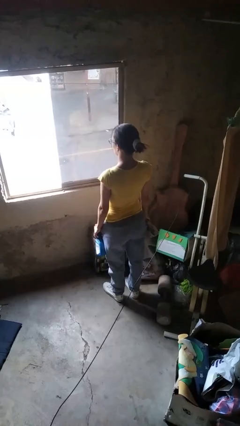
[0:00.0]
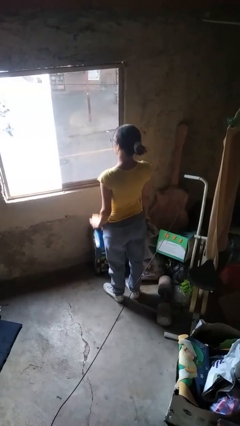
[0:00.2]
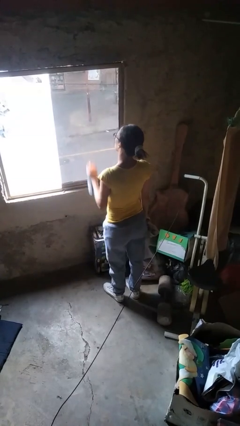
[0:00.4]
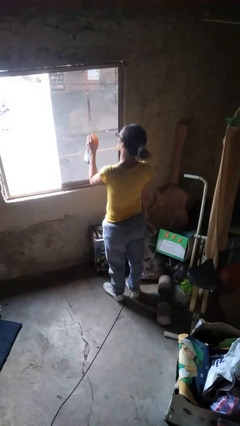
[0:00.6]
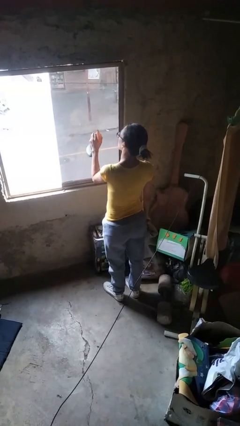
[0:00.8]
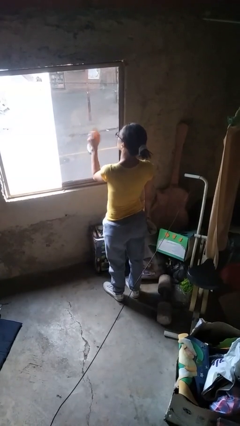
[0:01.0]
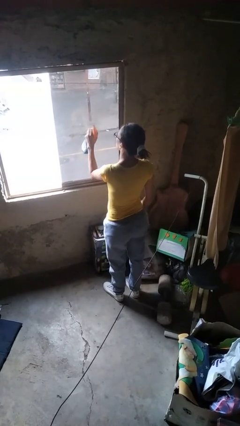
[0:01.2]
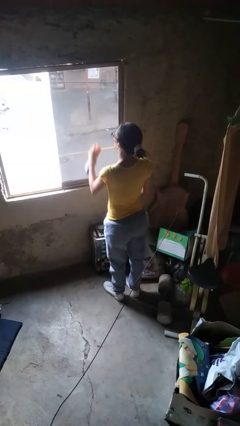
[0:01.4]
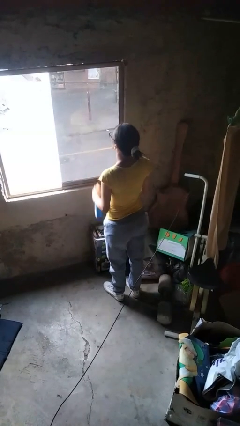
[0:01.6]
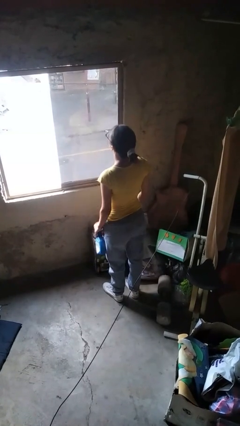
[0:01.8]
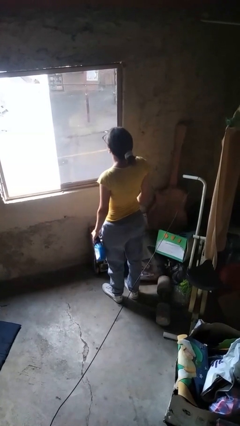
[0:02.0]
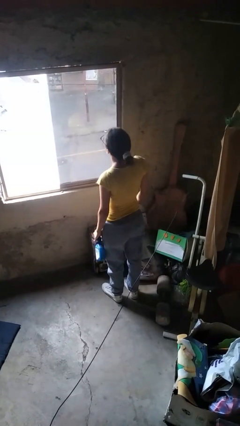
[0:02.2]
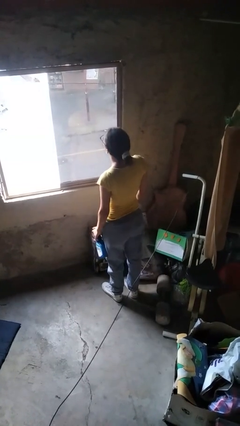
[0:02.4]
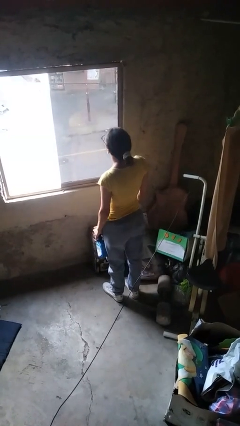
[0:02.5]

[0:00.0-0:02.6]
person sprays from bottle

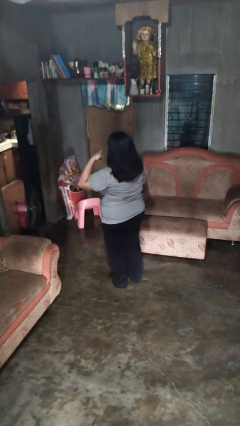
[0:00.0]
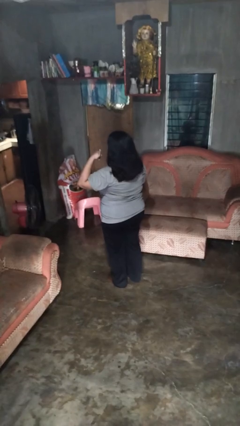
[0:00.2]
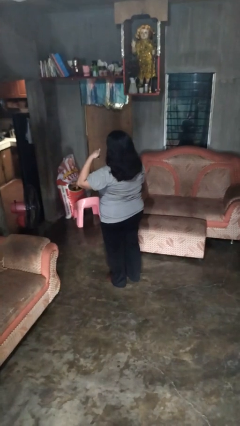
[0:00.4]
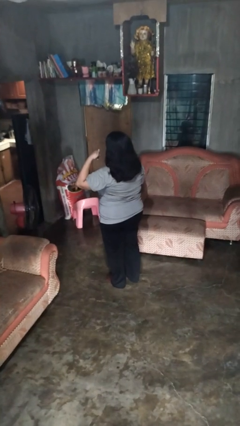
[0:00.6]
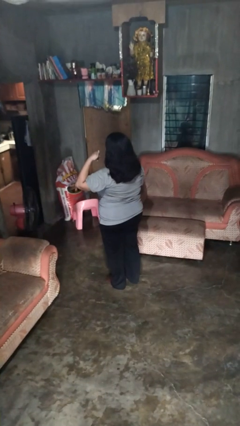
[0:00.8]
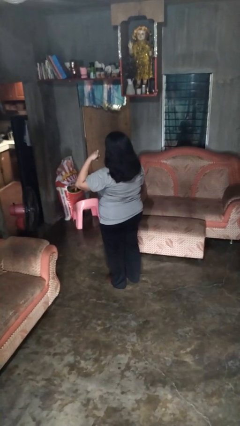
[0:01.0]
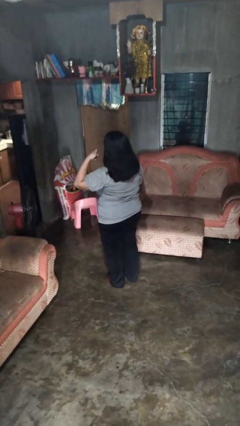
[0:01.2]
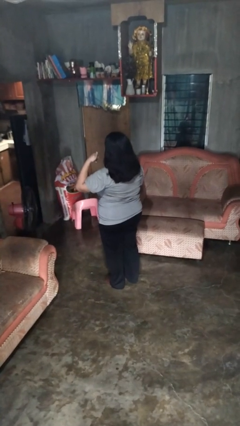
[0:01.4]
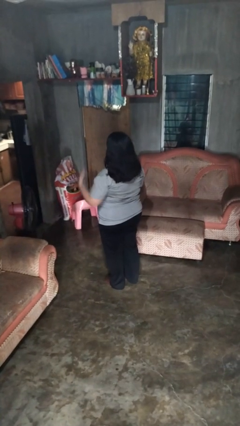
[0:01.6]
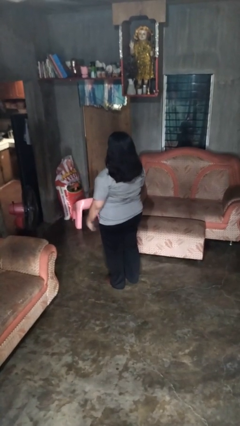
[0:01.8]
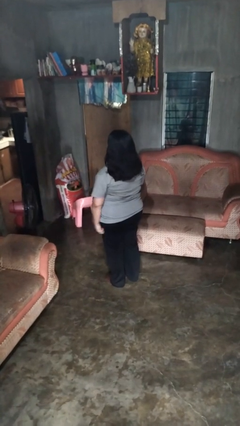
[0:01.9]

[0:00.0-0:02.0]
person gestures call me

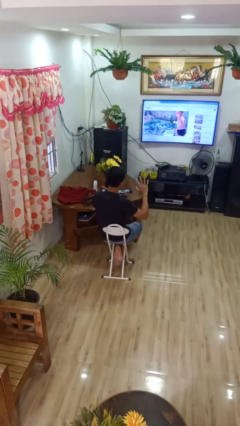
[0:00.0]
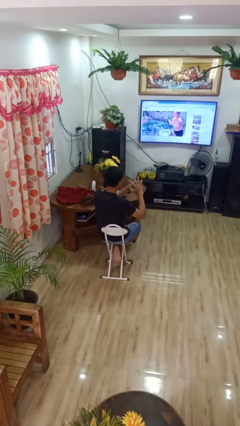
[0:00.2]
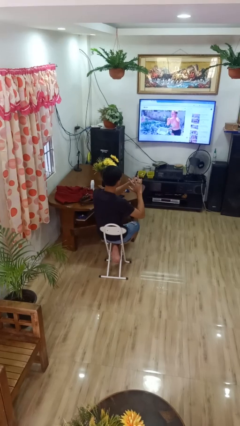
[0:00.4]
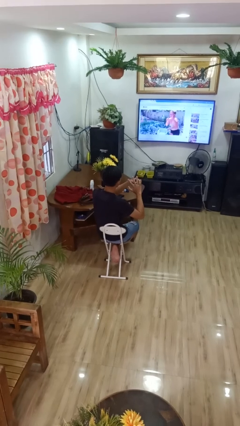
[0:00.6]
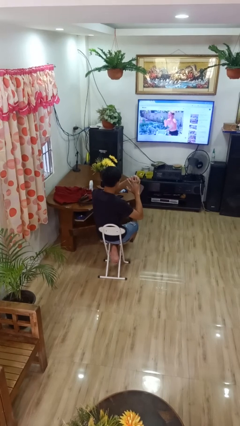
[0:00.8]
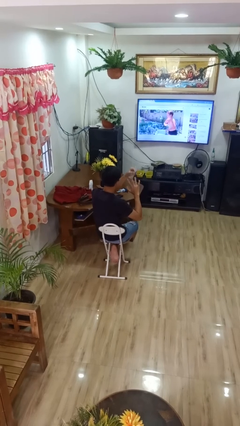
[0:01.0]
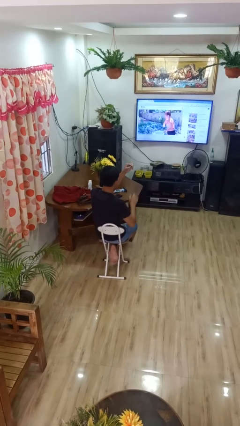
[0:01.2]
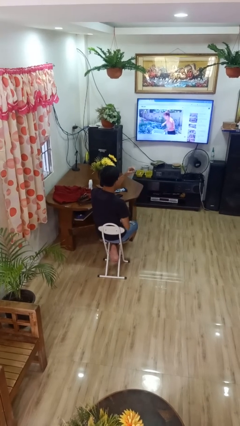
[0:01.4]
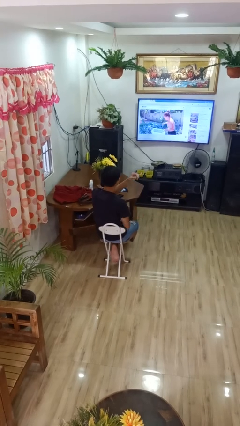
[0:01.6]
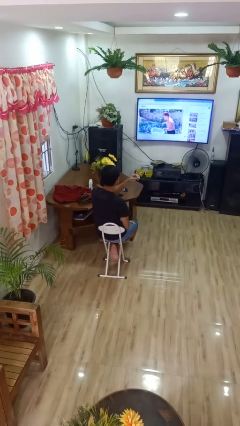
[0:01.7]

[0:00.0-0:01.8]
person takes off ring

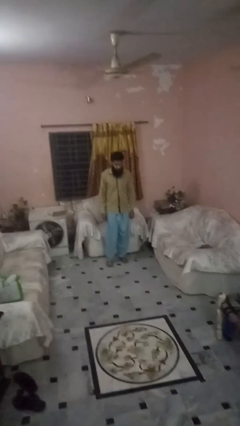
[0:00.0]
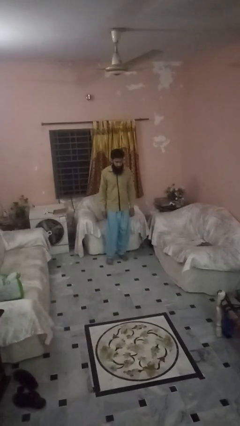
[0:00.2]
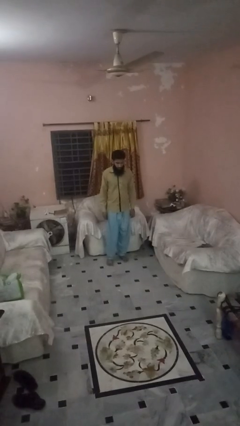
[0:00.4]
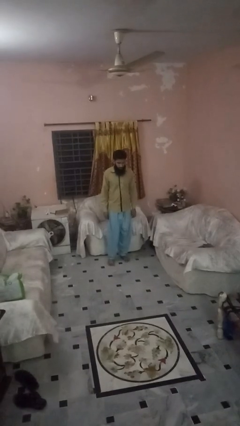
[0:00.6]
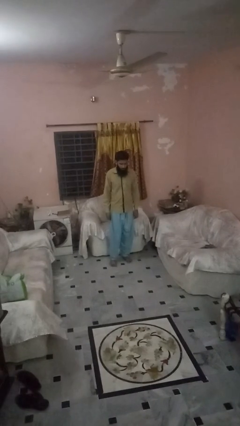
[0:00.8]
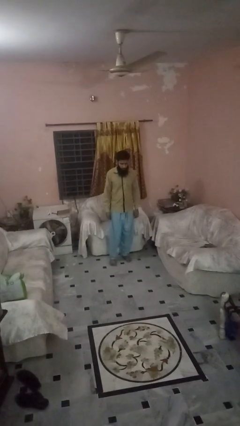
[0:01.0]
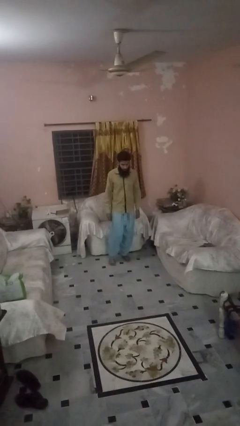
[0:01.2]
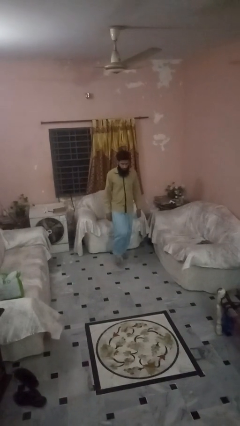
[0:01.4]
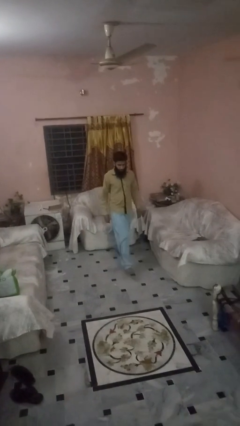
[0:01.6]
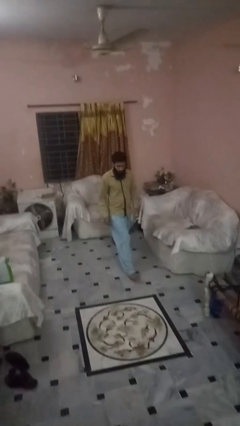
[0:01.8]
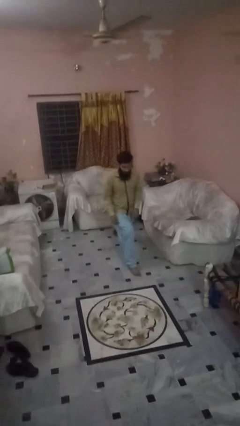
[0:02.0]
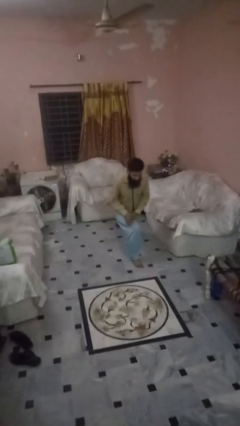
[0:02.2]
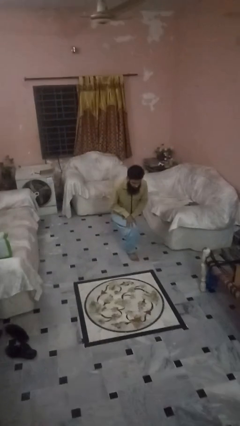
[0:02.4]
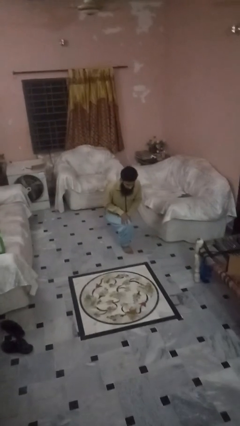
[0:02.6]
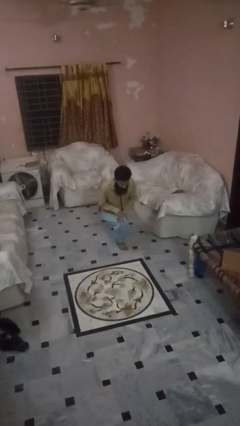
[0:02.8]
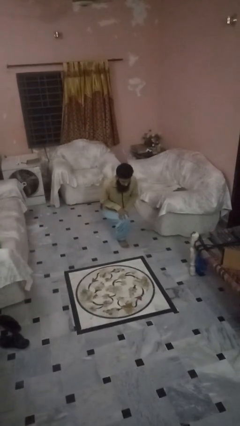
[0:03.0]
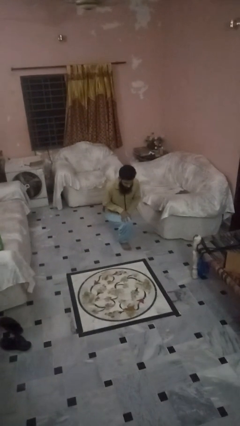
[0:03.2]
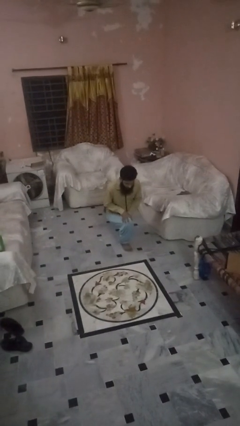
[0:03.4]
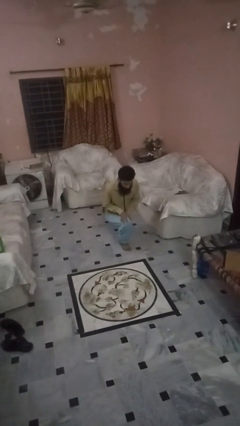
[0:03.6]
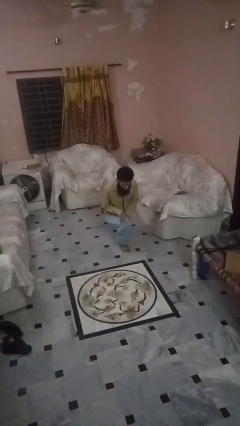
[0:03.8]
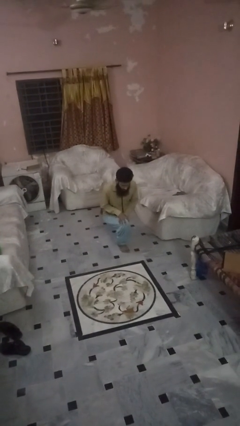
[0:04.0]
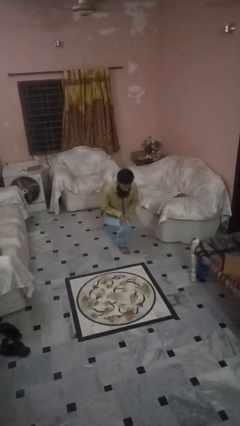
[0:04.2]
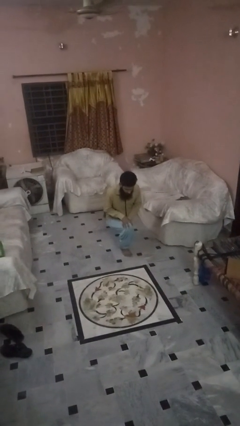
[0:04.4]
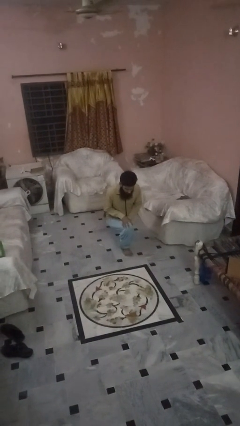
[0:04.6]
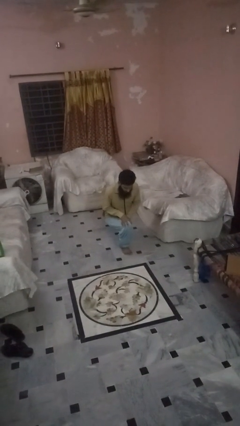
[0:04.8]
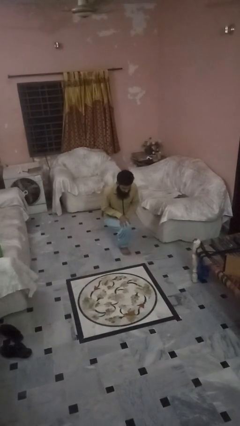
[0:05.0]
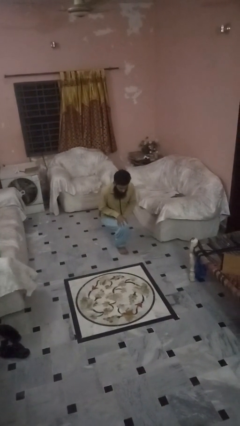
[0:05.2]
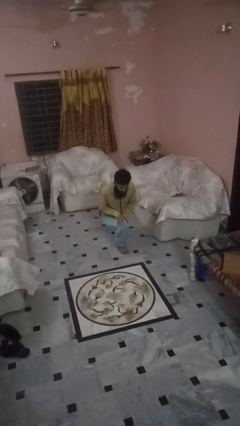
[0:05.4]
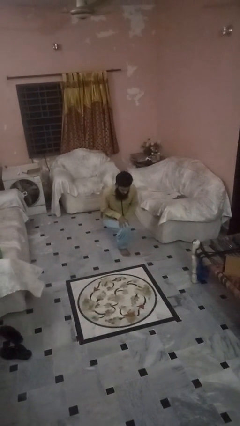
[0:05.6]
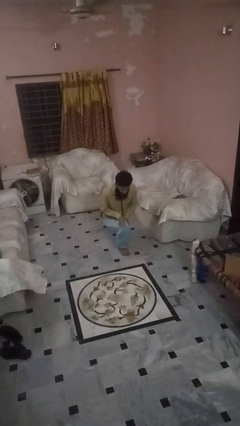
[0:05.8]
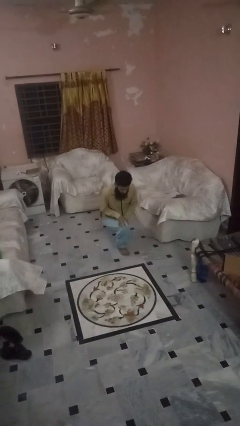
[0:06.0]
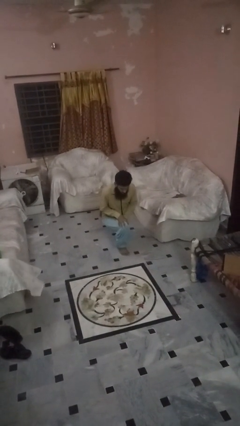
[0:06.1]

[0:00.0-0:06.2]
person exercises with lunges

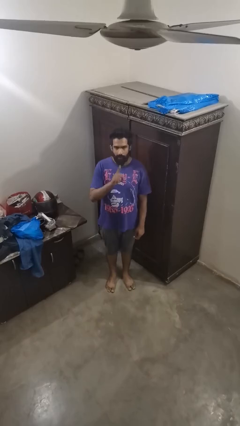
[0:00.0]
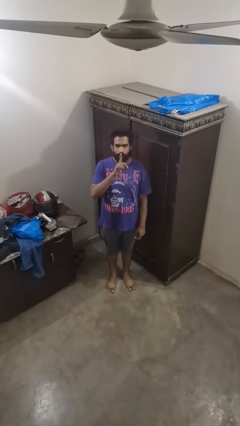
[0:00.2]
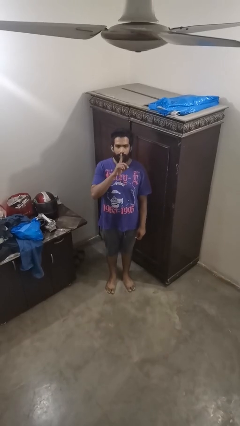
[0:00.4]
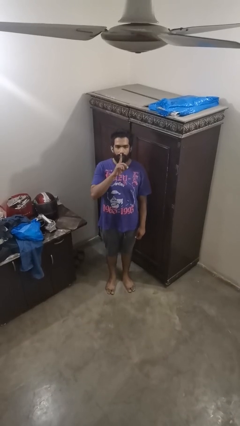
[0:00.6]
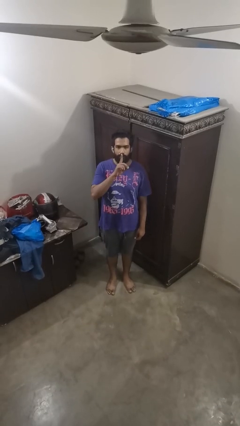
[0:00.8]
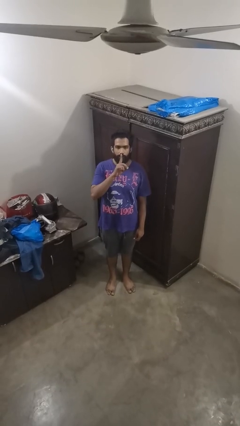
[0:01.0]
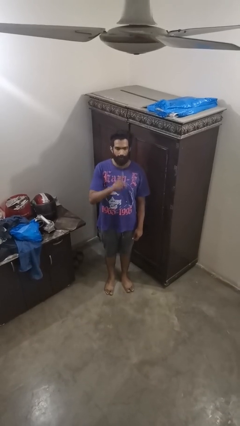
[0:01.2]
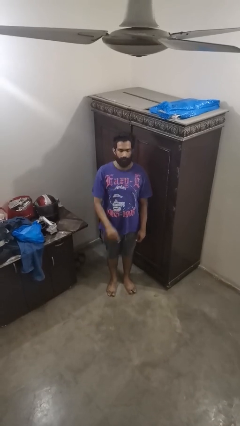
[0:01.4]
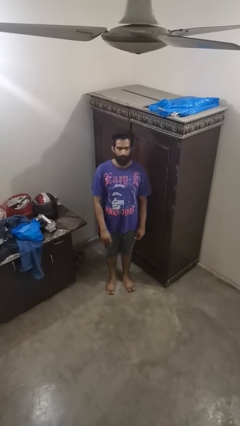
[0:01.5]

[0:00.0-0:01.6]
person gestures be quiet

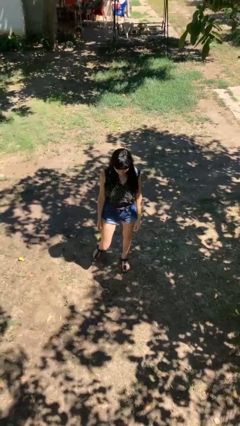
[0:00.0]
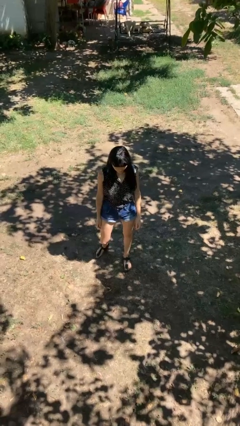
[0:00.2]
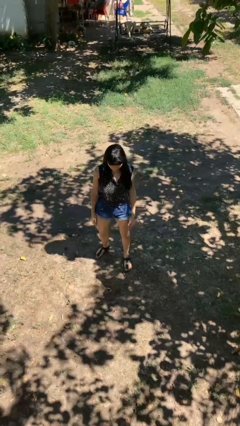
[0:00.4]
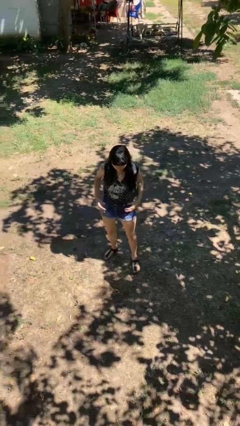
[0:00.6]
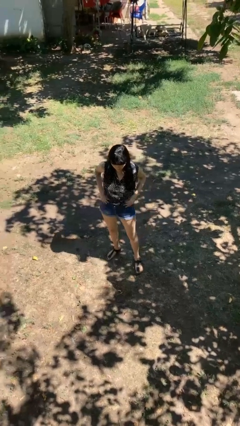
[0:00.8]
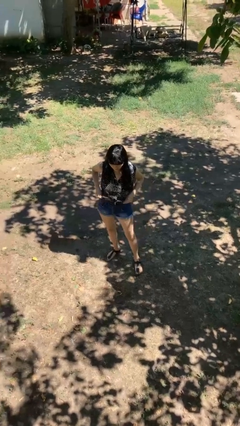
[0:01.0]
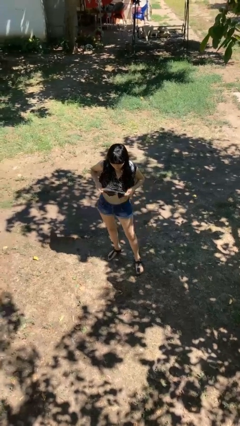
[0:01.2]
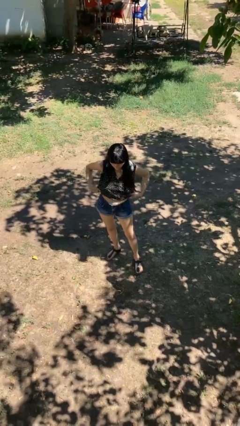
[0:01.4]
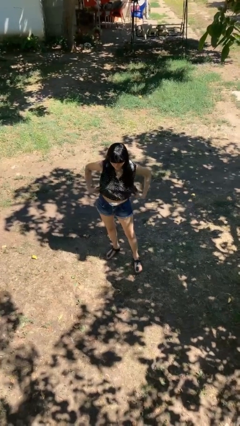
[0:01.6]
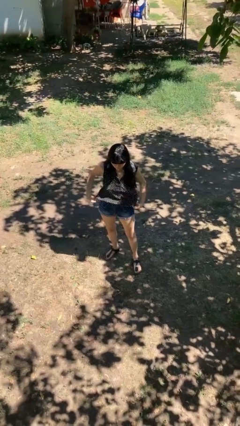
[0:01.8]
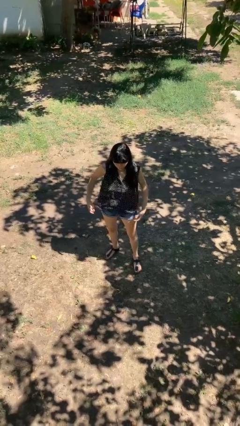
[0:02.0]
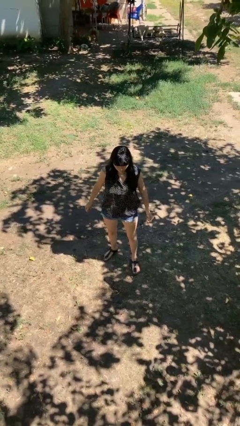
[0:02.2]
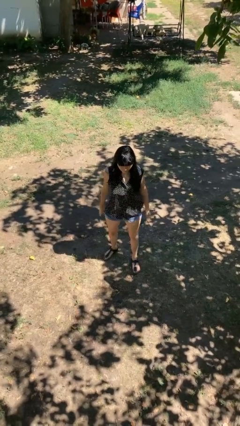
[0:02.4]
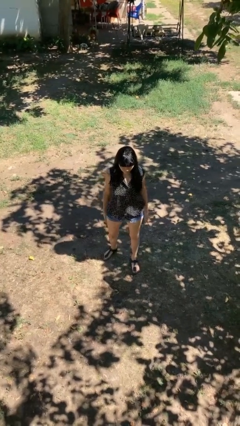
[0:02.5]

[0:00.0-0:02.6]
person untucks shirt

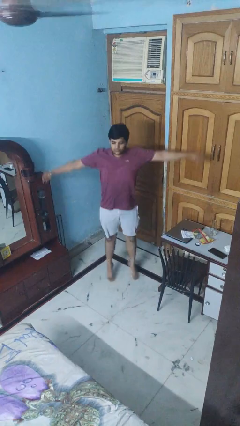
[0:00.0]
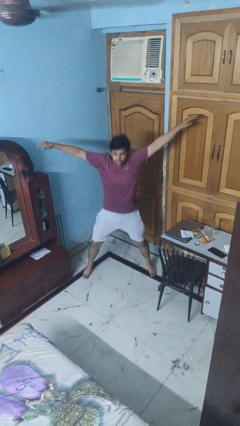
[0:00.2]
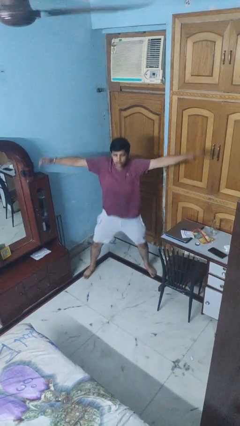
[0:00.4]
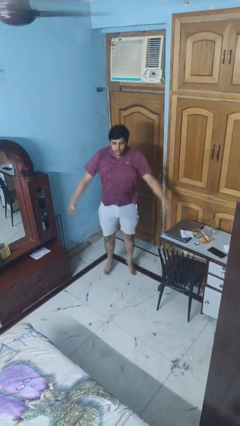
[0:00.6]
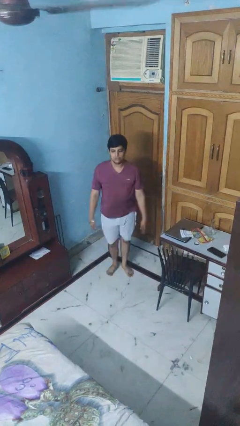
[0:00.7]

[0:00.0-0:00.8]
person exercises with jumping jacks
